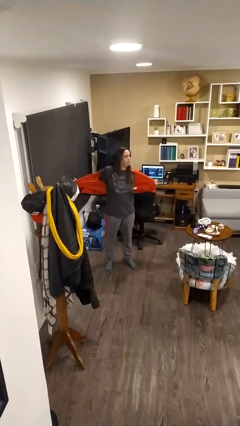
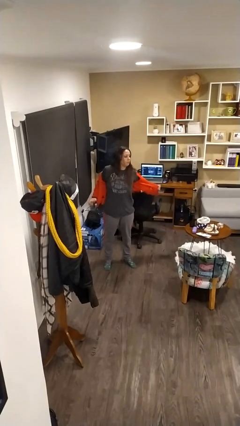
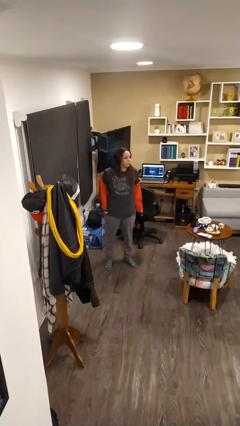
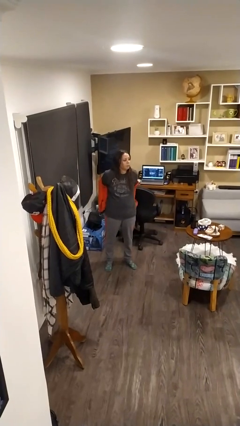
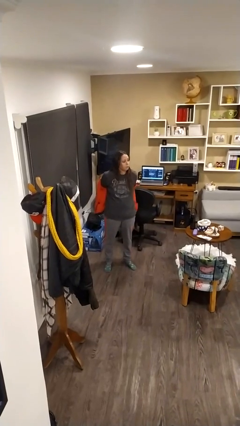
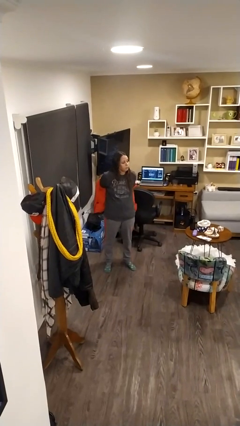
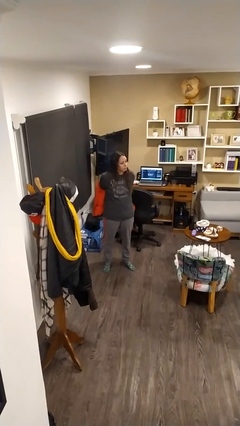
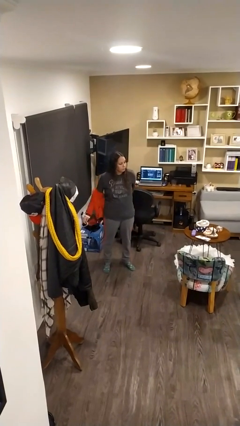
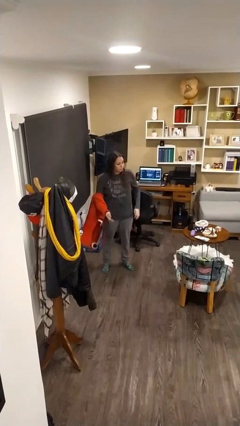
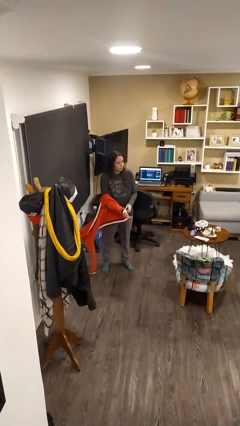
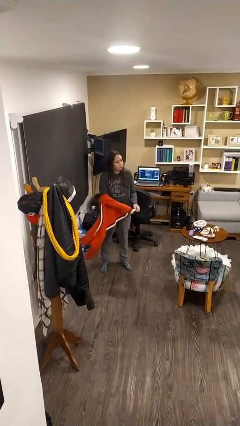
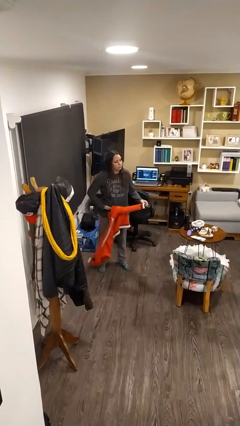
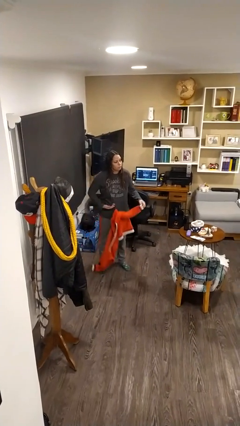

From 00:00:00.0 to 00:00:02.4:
person takes off jacket

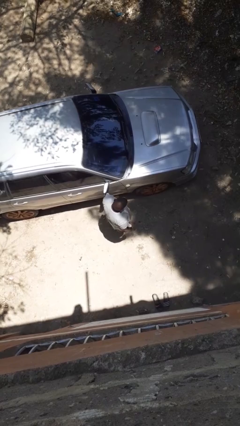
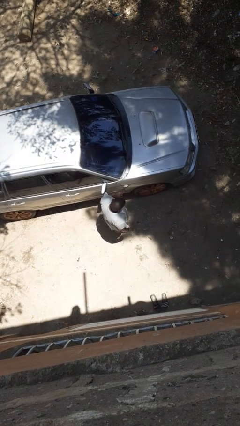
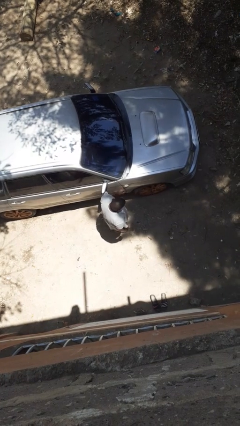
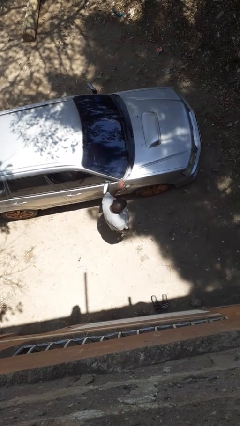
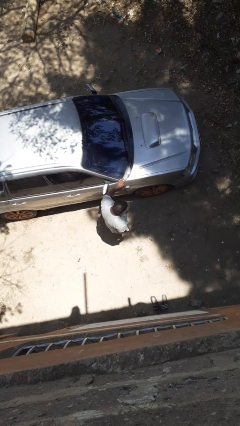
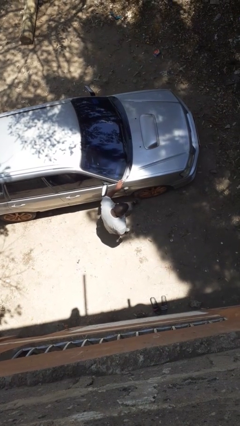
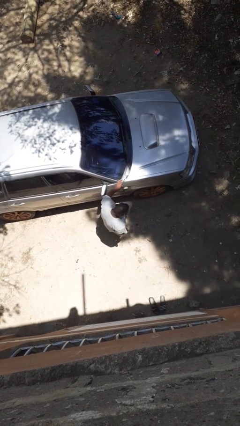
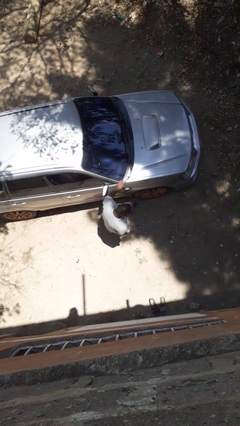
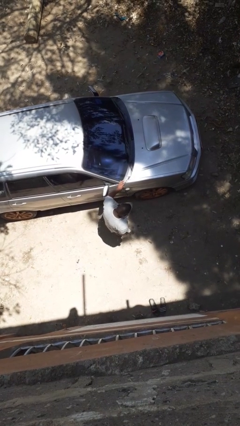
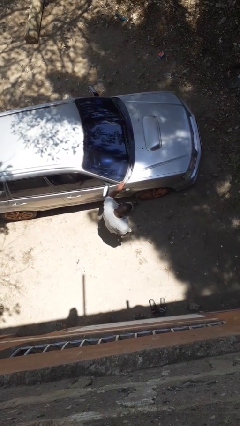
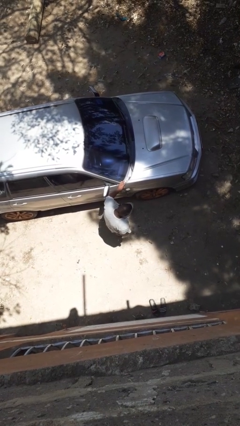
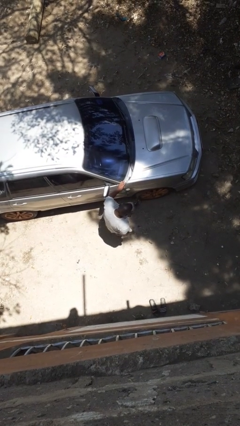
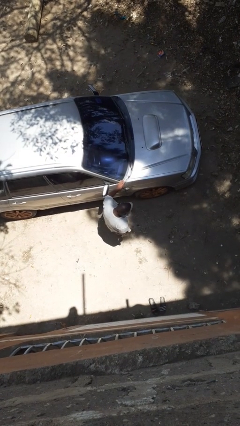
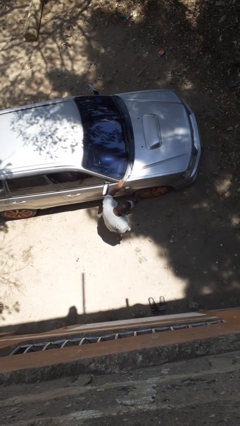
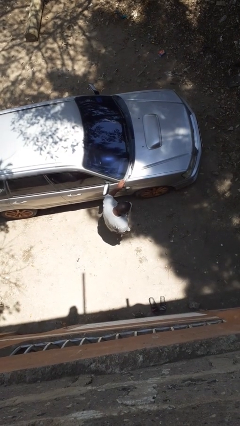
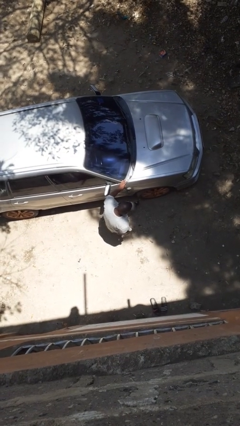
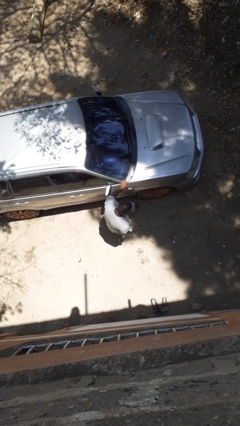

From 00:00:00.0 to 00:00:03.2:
person kicks car tires

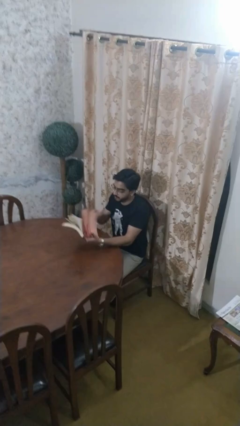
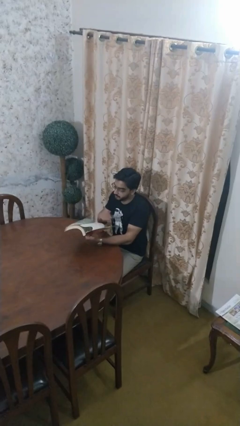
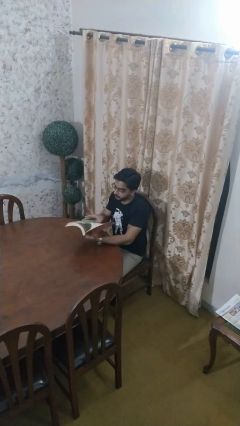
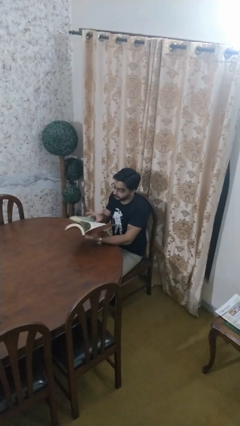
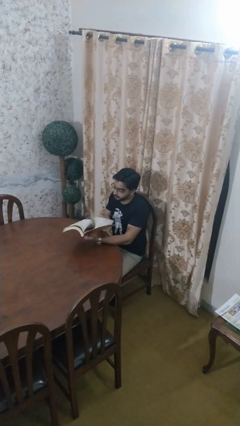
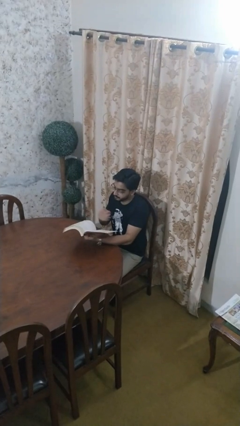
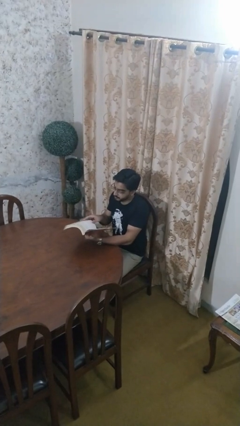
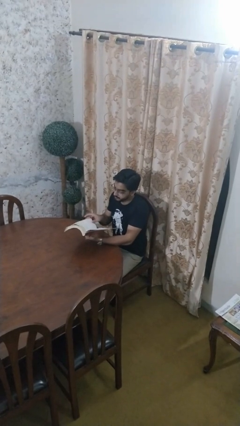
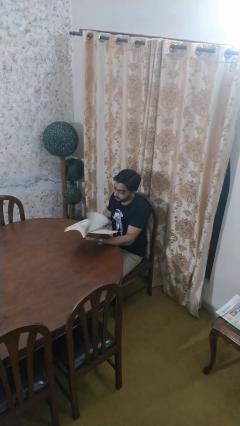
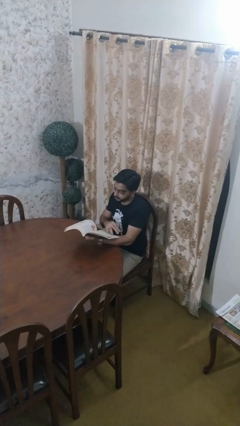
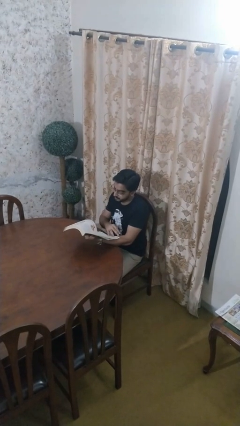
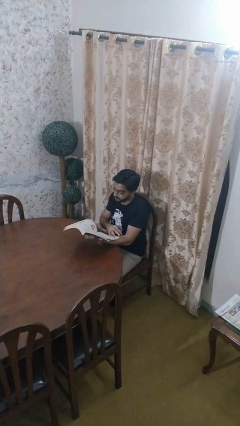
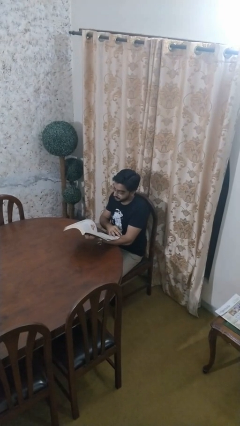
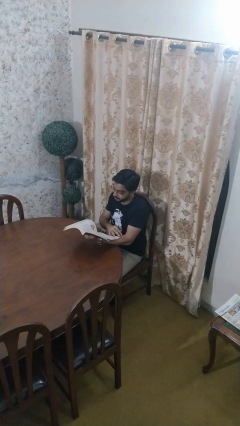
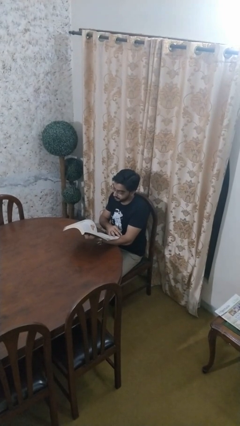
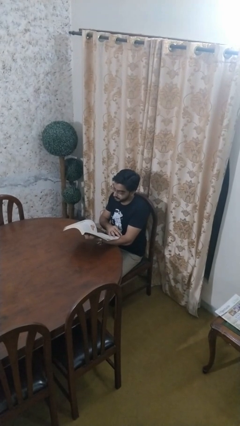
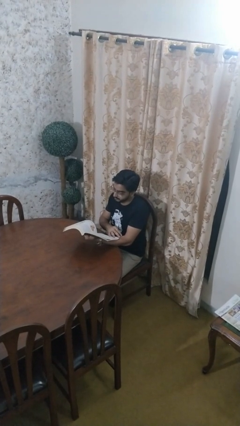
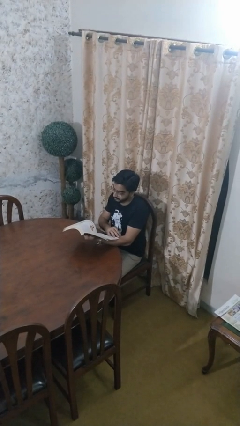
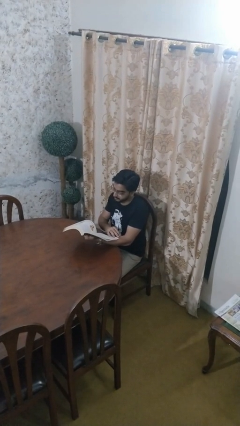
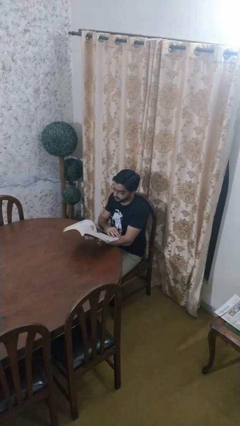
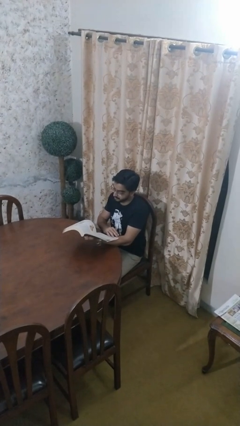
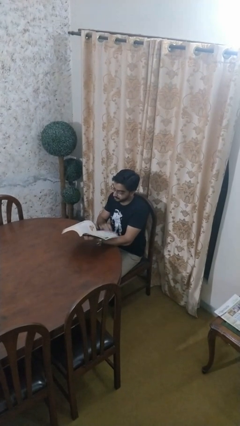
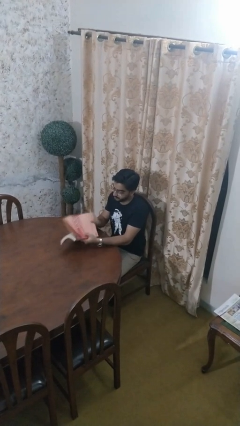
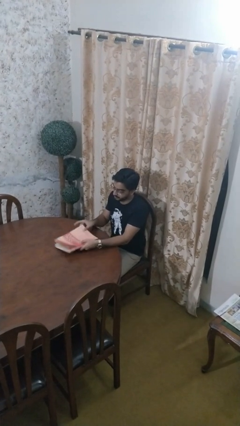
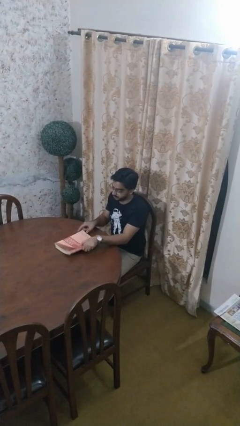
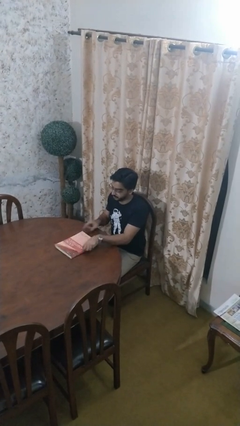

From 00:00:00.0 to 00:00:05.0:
person reads book

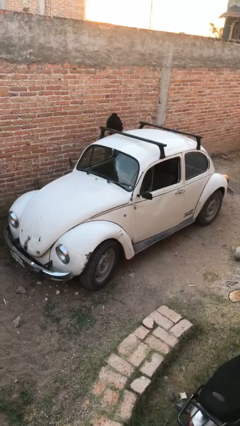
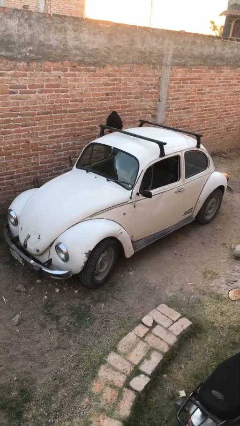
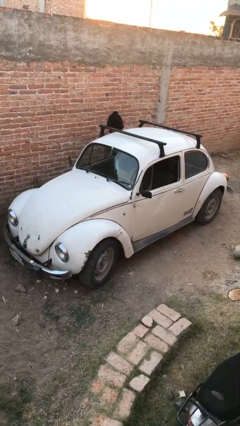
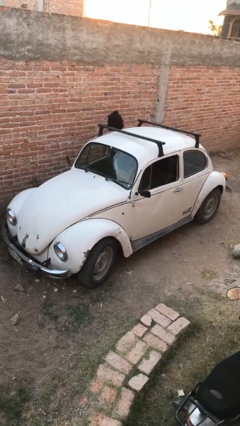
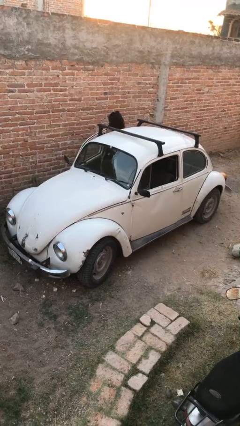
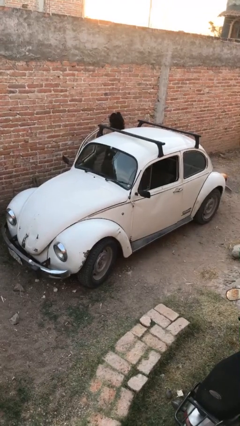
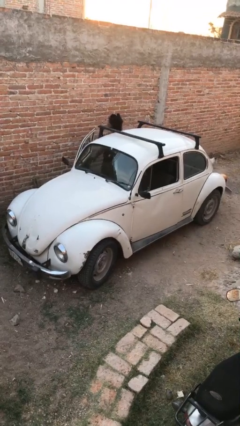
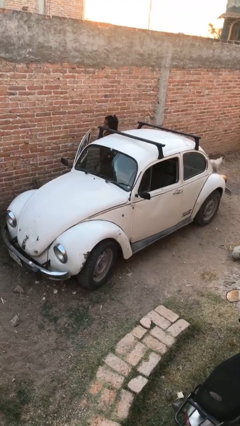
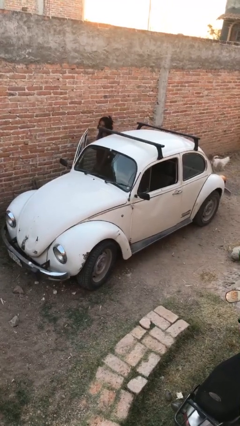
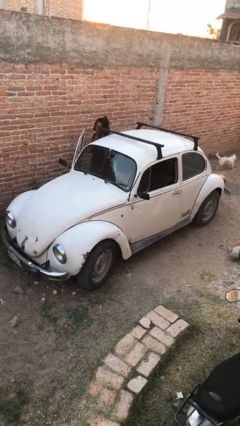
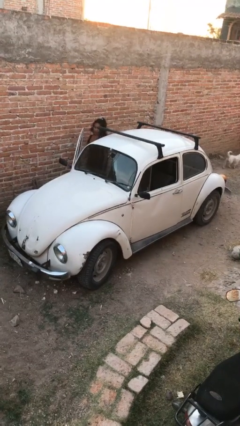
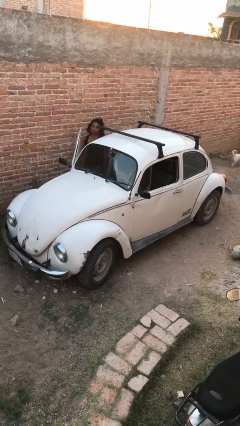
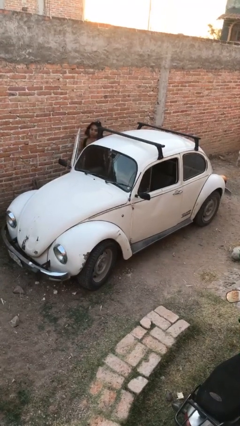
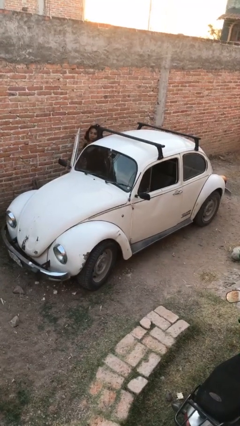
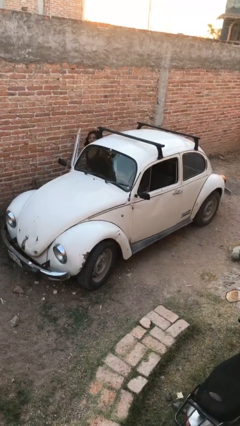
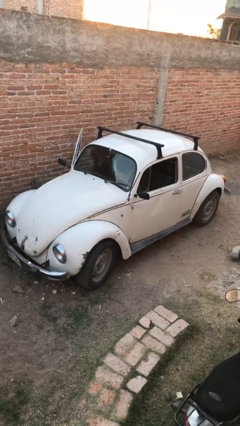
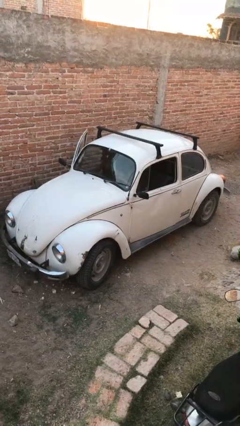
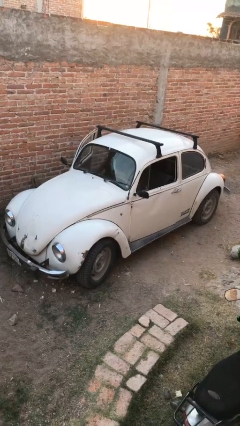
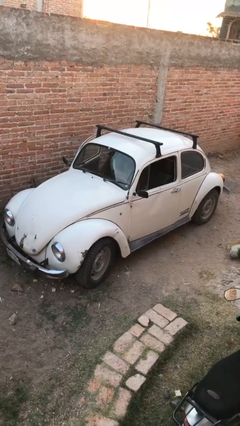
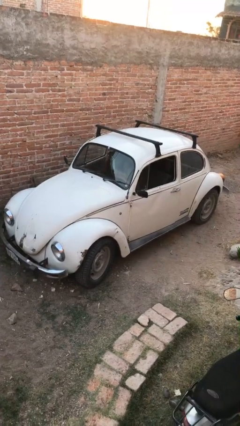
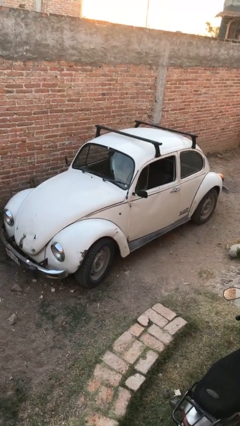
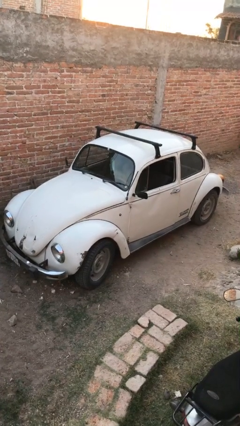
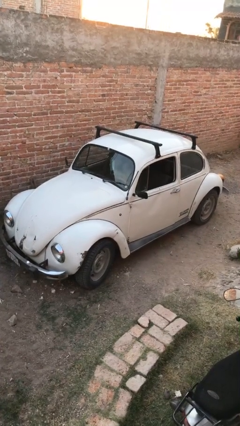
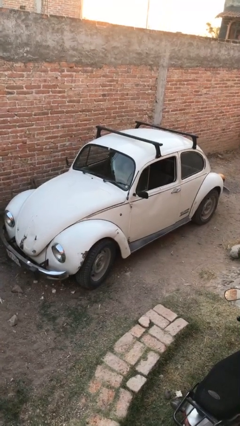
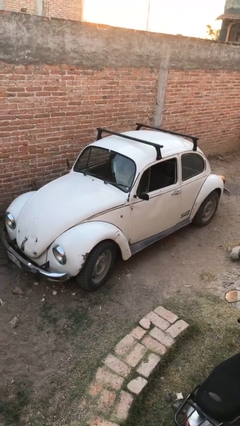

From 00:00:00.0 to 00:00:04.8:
car picks up person

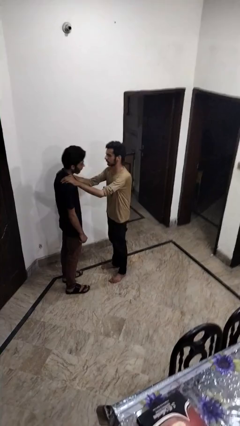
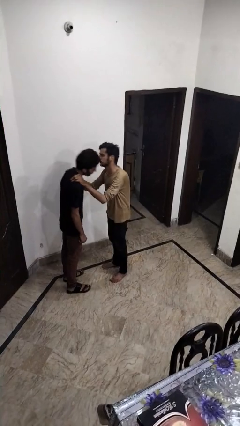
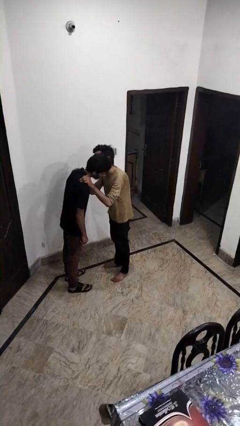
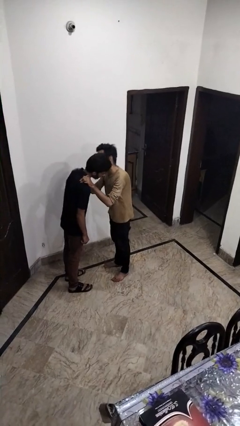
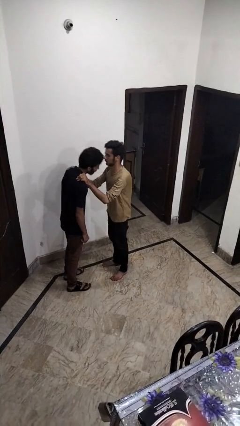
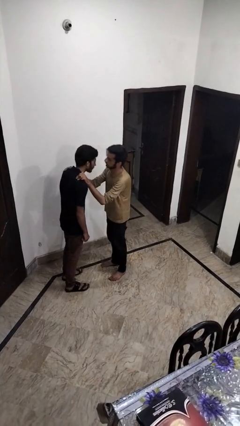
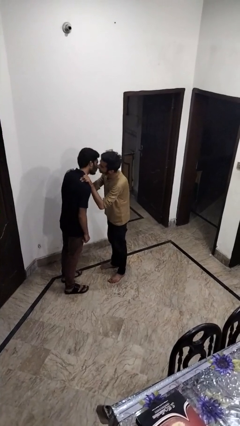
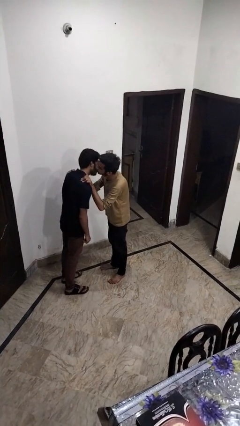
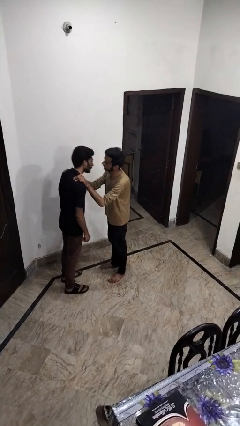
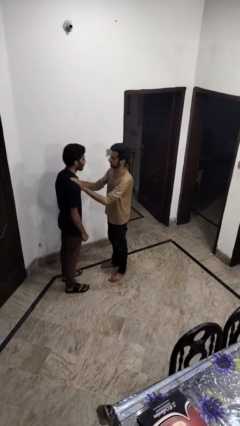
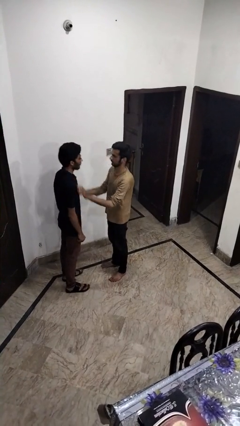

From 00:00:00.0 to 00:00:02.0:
person kisses cheek of person
